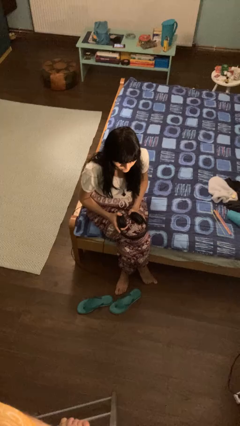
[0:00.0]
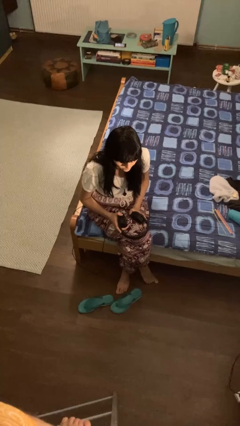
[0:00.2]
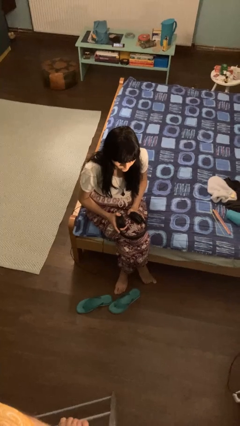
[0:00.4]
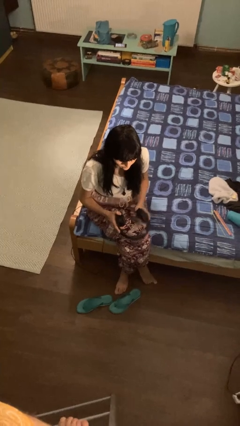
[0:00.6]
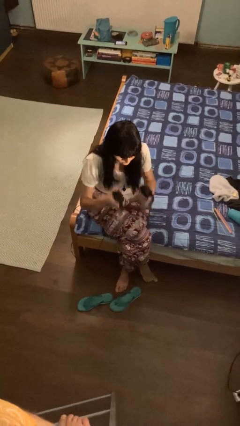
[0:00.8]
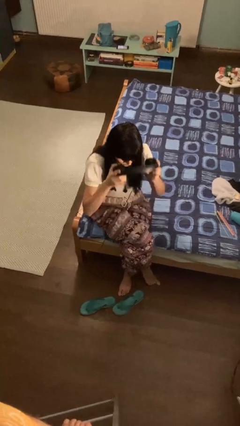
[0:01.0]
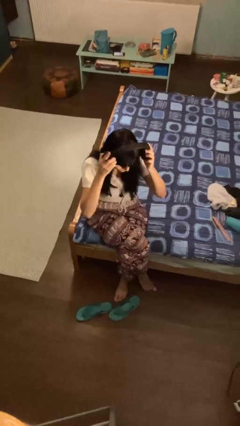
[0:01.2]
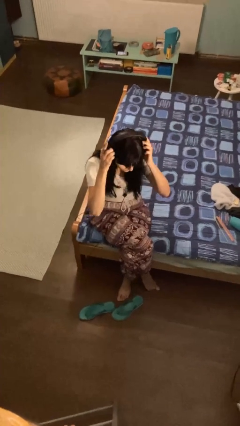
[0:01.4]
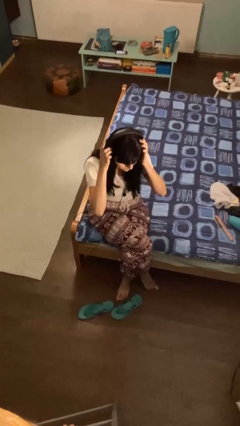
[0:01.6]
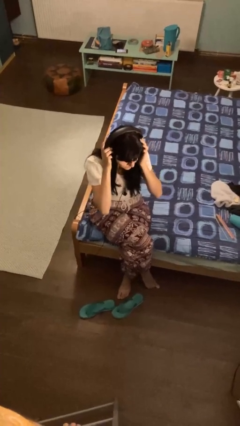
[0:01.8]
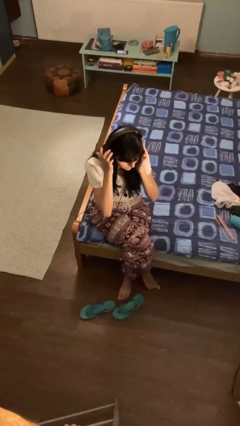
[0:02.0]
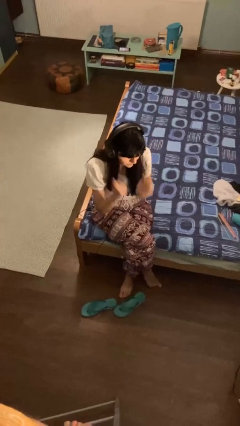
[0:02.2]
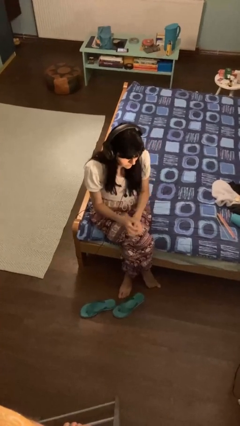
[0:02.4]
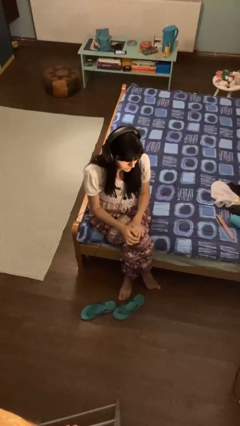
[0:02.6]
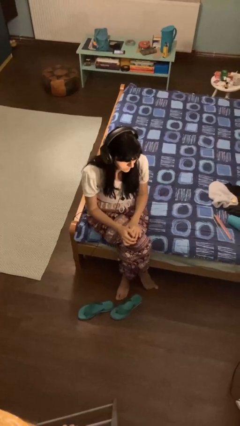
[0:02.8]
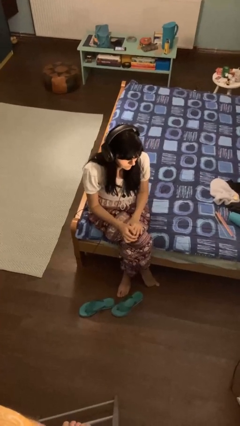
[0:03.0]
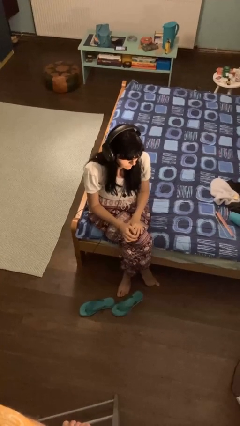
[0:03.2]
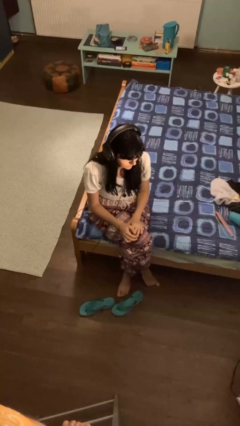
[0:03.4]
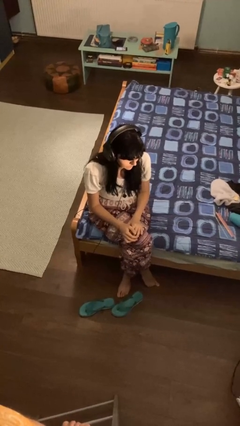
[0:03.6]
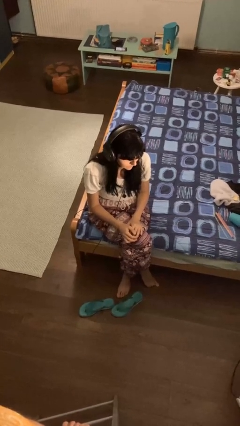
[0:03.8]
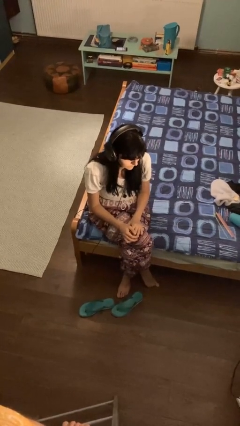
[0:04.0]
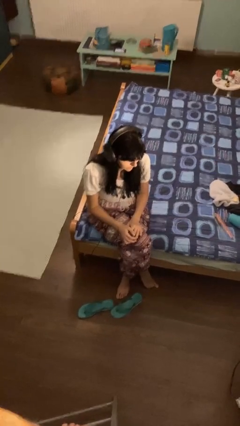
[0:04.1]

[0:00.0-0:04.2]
person puts on headphones

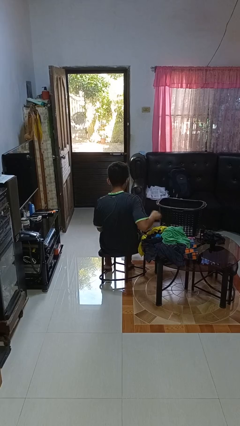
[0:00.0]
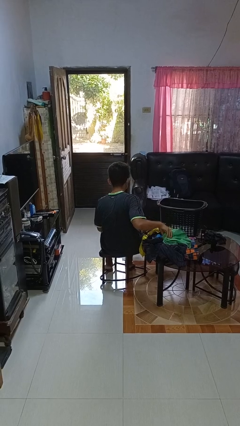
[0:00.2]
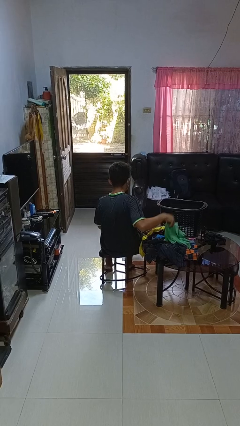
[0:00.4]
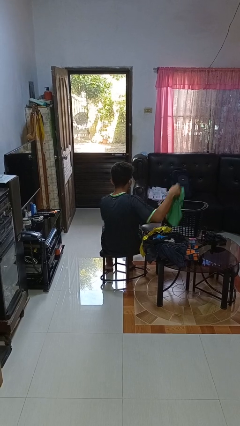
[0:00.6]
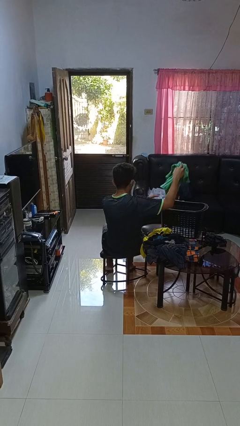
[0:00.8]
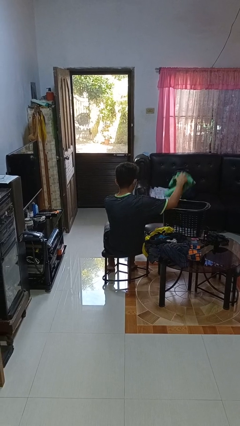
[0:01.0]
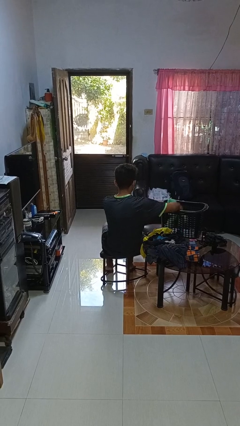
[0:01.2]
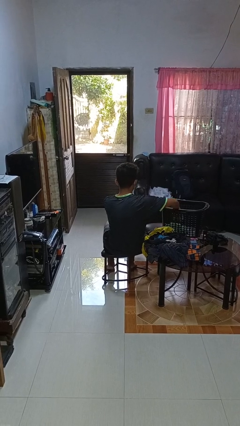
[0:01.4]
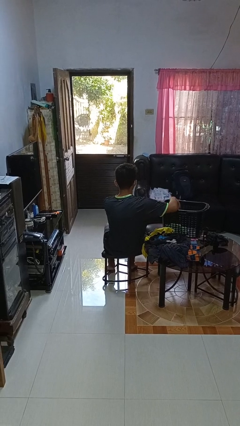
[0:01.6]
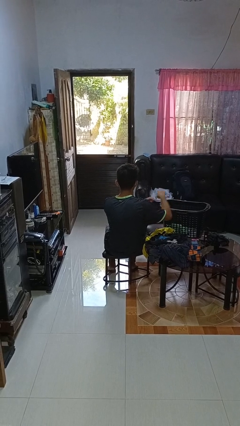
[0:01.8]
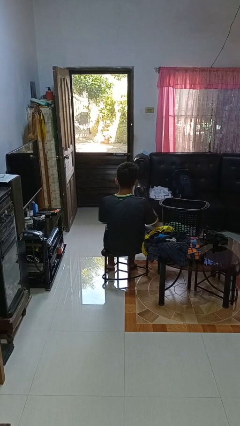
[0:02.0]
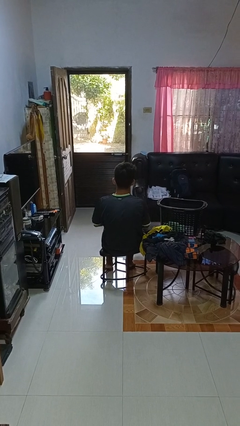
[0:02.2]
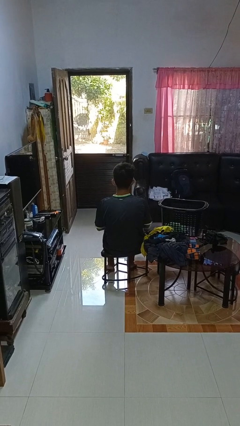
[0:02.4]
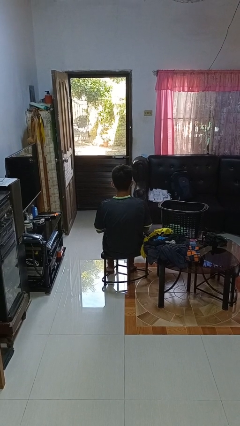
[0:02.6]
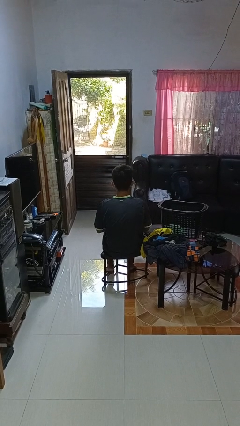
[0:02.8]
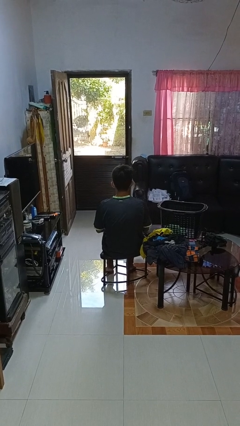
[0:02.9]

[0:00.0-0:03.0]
person puts object into basket

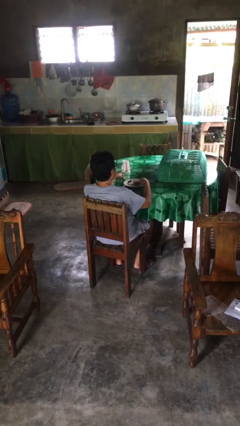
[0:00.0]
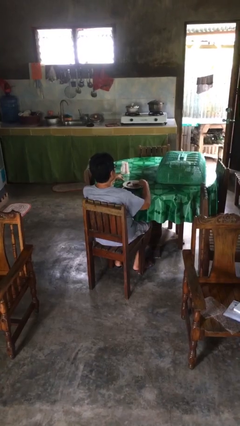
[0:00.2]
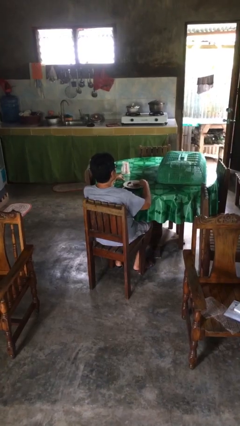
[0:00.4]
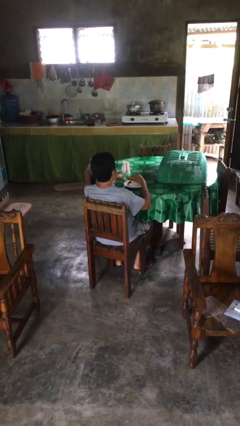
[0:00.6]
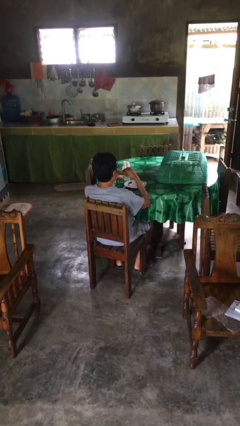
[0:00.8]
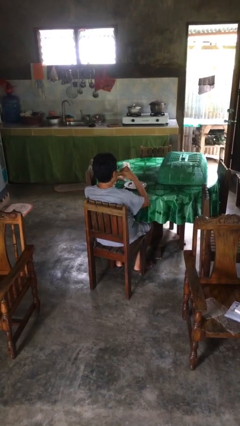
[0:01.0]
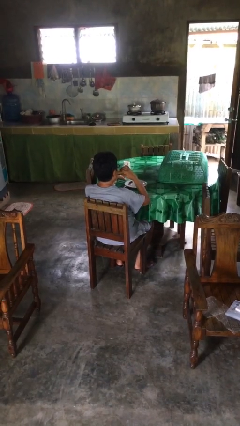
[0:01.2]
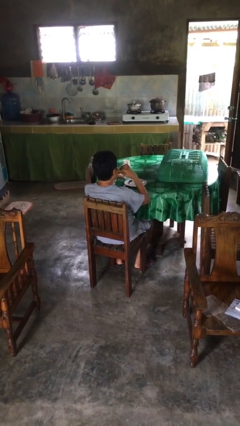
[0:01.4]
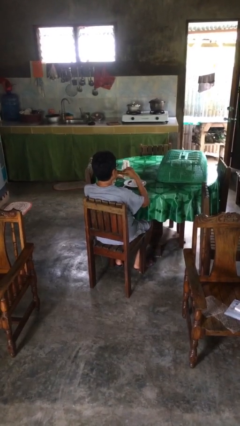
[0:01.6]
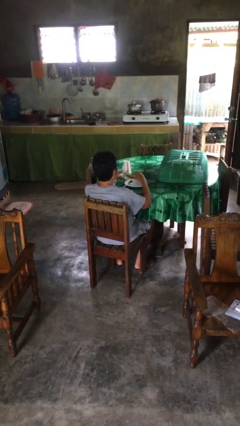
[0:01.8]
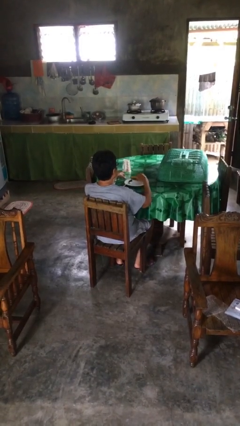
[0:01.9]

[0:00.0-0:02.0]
person eats with hands

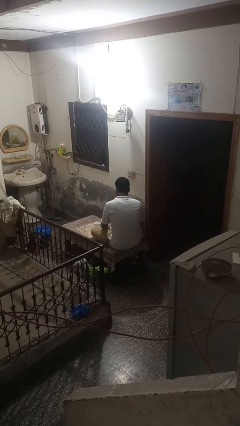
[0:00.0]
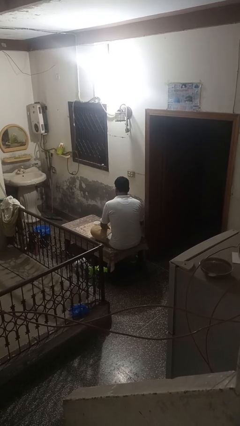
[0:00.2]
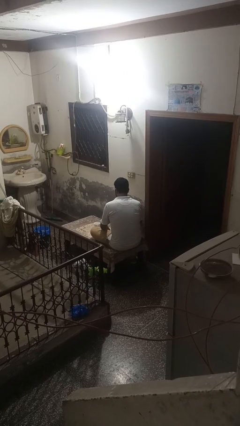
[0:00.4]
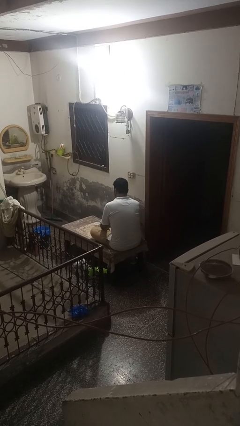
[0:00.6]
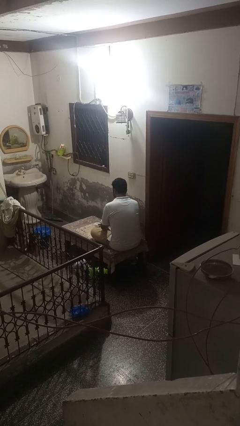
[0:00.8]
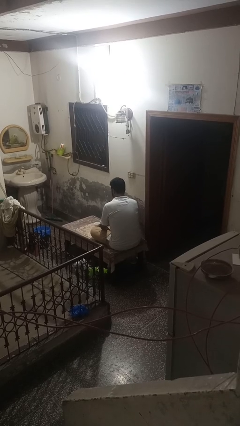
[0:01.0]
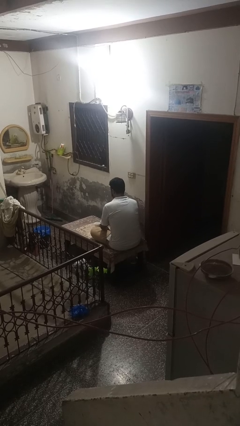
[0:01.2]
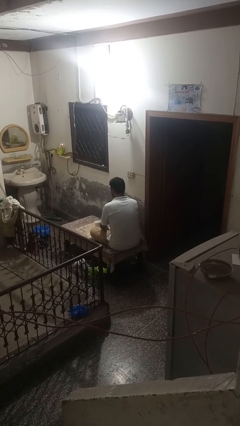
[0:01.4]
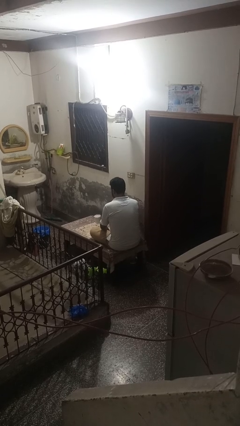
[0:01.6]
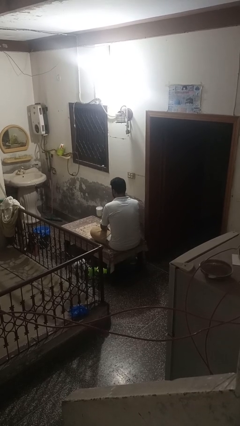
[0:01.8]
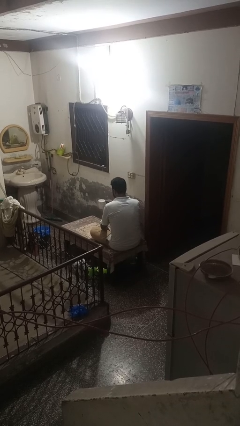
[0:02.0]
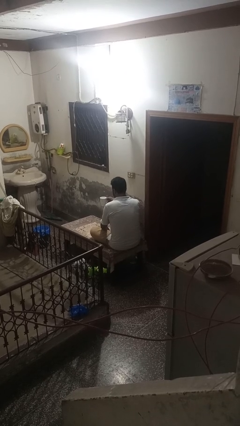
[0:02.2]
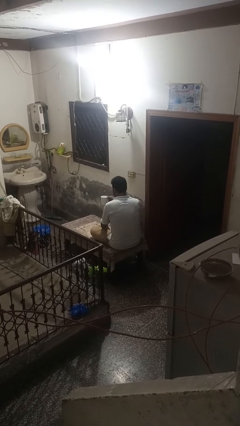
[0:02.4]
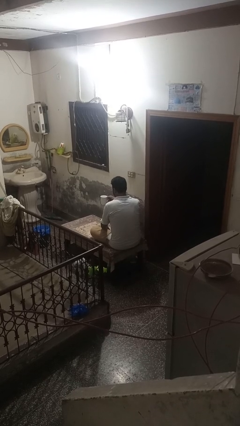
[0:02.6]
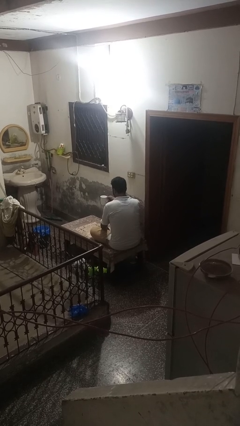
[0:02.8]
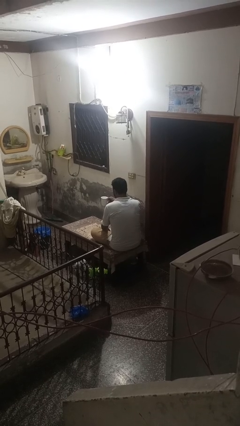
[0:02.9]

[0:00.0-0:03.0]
person picks up object from table

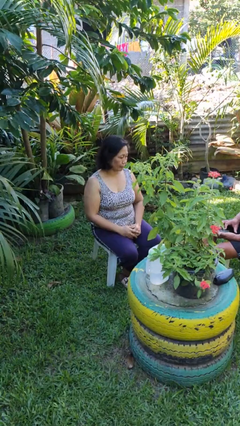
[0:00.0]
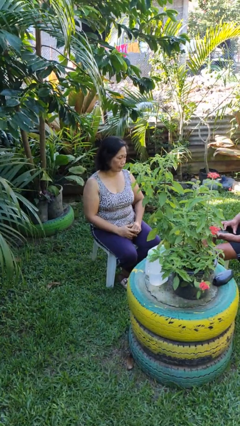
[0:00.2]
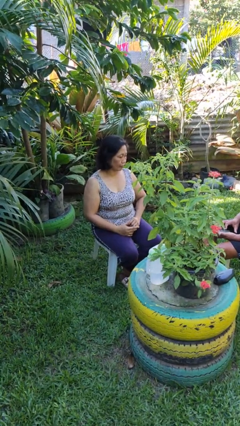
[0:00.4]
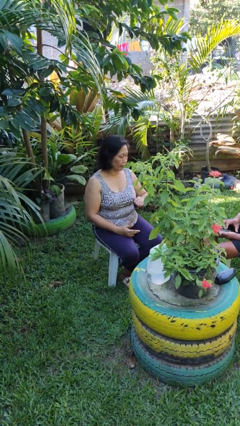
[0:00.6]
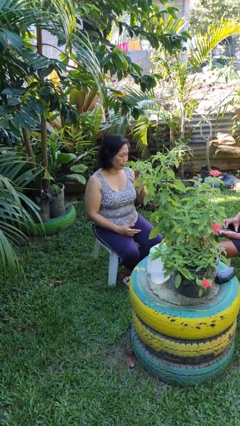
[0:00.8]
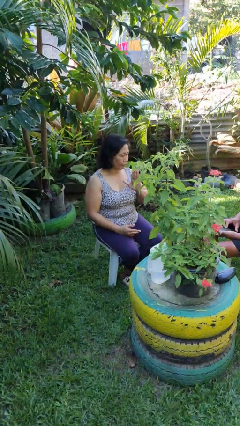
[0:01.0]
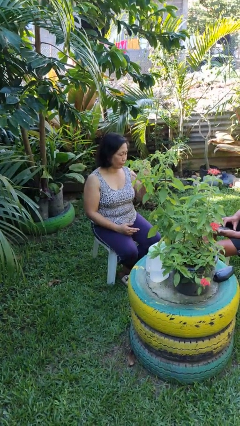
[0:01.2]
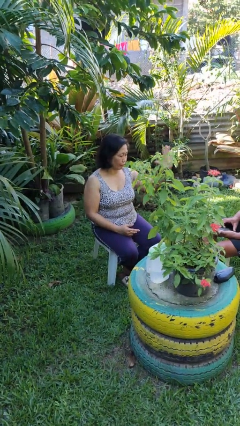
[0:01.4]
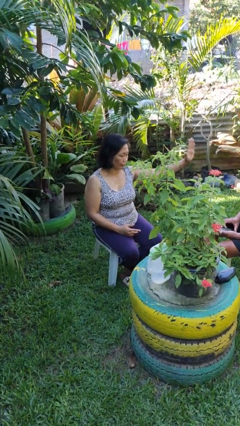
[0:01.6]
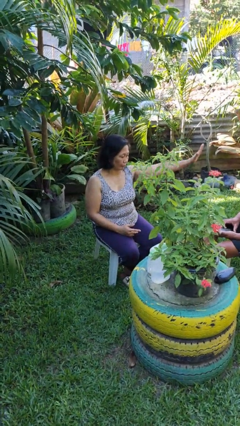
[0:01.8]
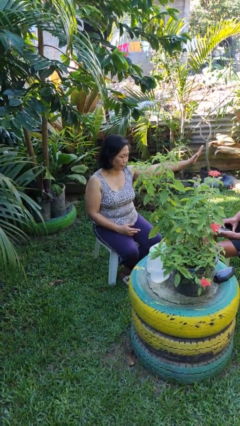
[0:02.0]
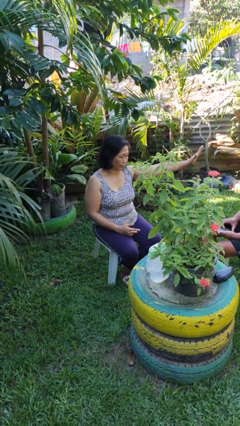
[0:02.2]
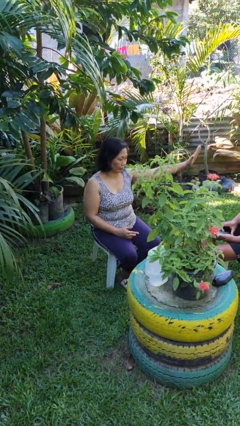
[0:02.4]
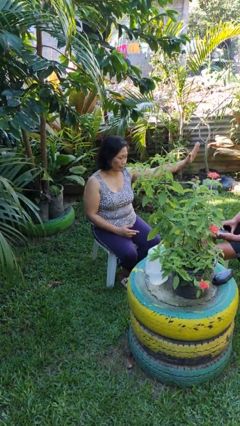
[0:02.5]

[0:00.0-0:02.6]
person gestures swipe left

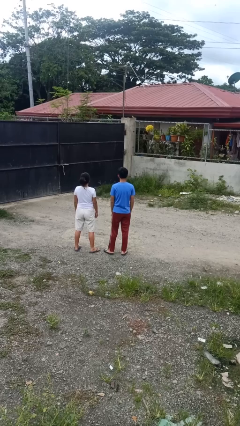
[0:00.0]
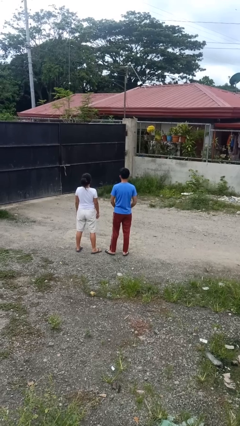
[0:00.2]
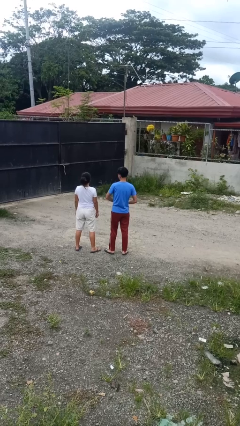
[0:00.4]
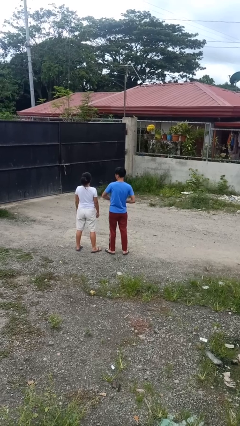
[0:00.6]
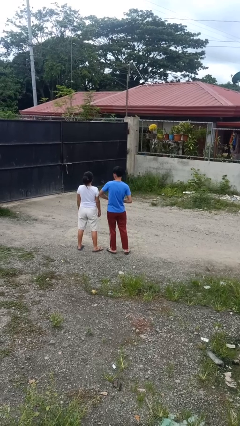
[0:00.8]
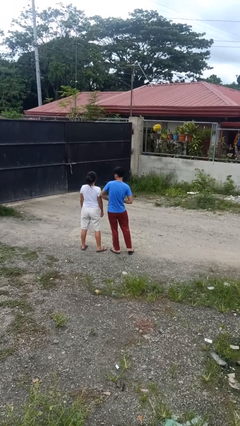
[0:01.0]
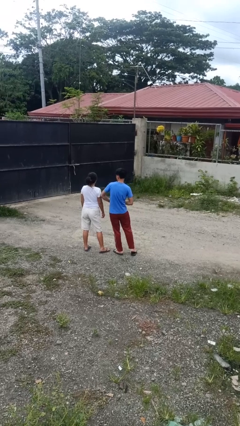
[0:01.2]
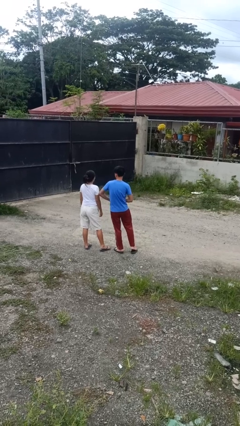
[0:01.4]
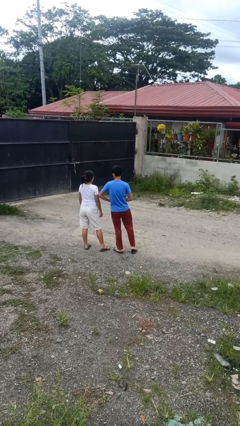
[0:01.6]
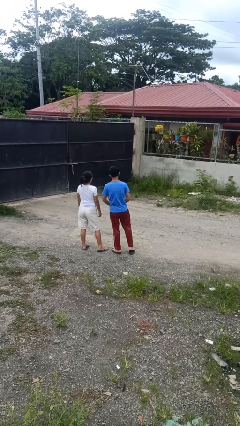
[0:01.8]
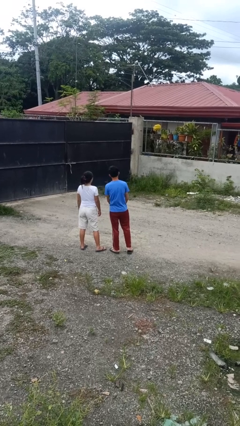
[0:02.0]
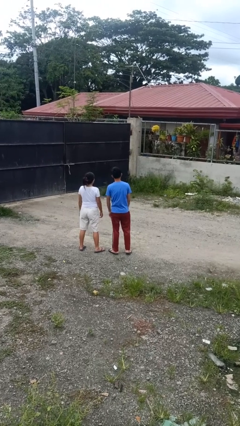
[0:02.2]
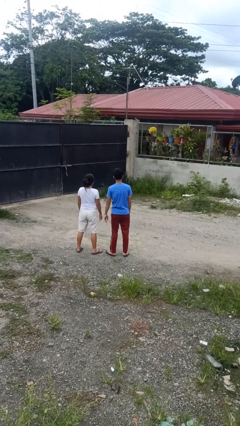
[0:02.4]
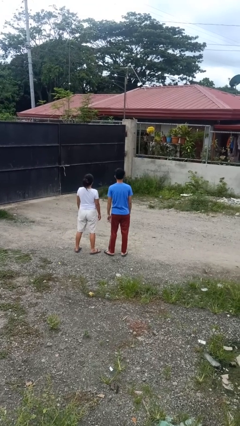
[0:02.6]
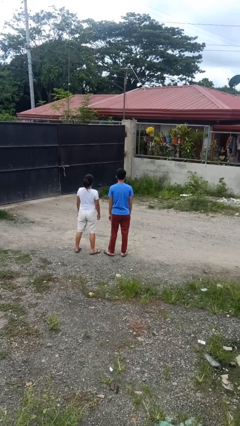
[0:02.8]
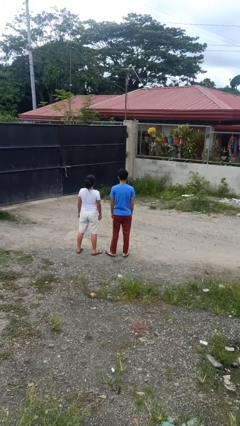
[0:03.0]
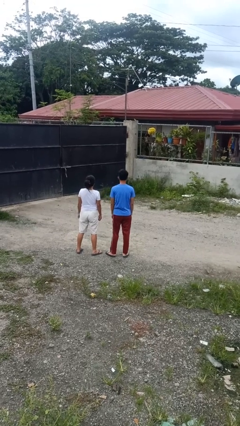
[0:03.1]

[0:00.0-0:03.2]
person nudges person with elbow
